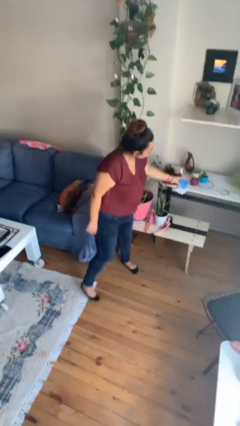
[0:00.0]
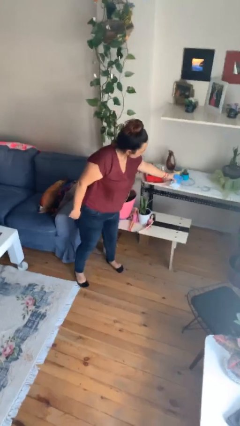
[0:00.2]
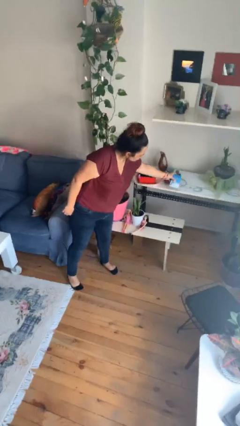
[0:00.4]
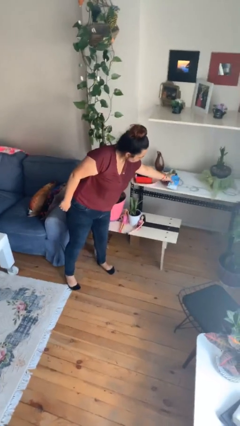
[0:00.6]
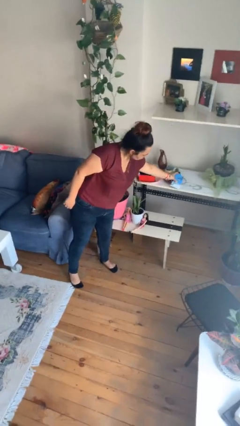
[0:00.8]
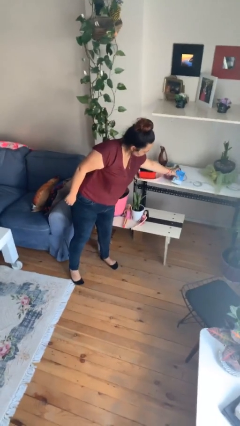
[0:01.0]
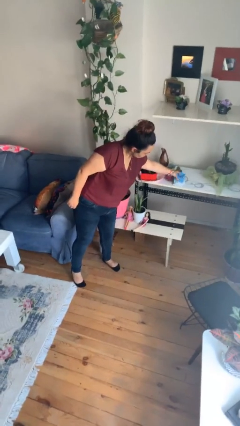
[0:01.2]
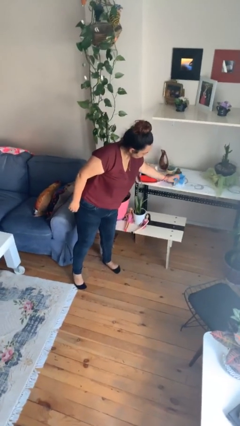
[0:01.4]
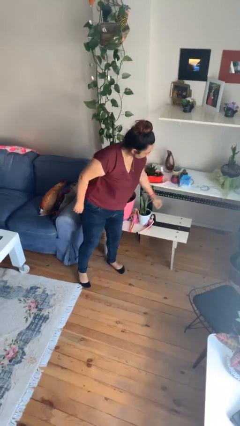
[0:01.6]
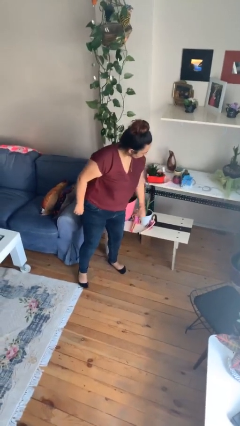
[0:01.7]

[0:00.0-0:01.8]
person puts down object on table

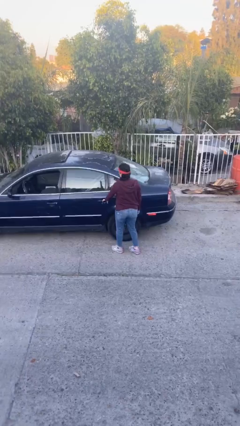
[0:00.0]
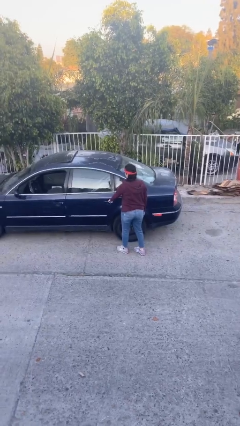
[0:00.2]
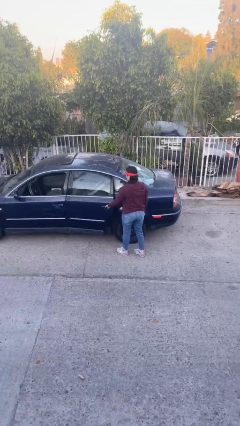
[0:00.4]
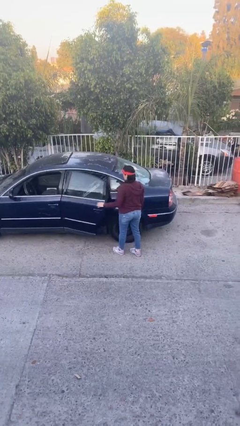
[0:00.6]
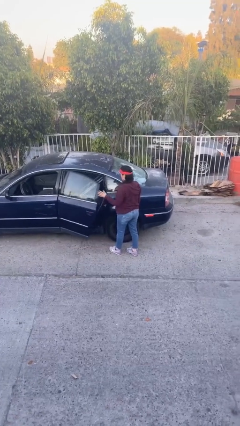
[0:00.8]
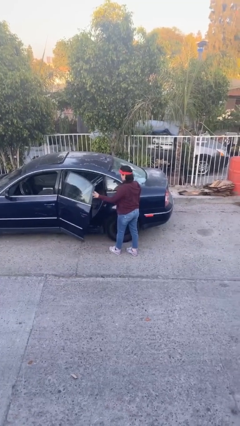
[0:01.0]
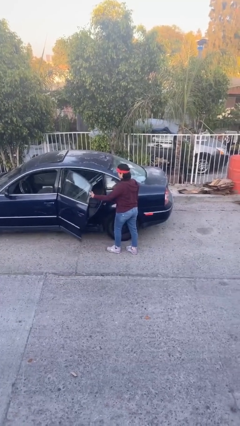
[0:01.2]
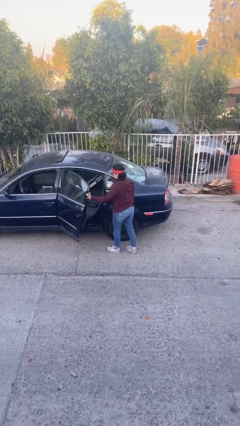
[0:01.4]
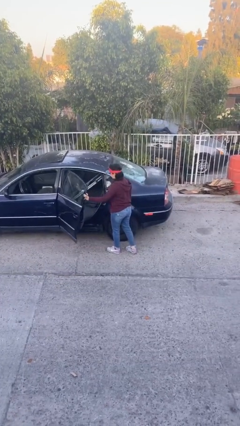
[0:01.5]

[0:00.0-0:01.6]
person opens car door

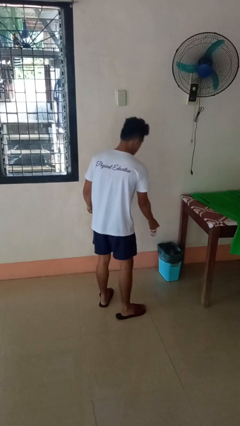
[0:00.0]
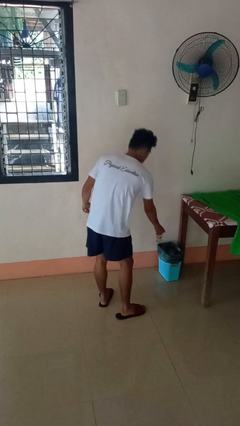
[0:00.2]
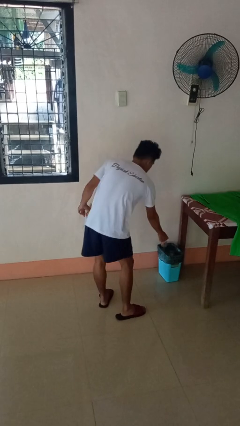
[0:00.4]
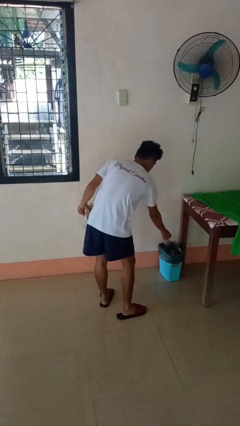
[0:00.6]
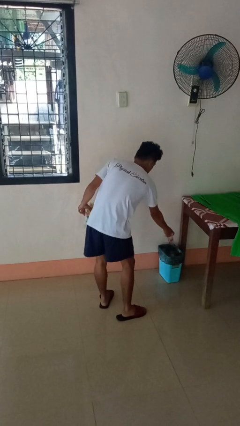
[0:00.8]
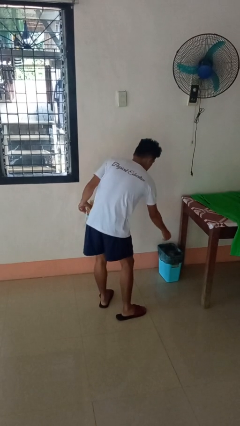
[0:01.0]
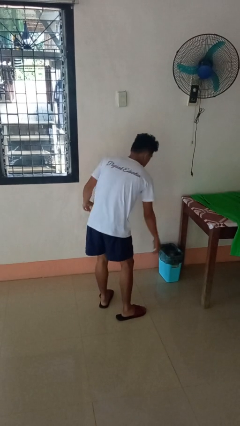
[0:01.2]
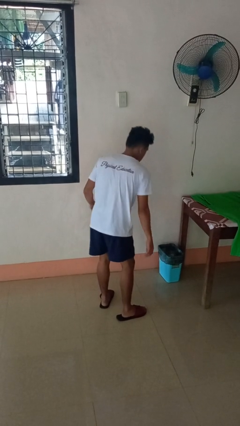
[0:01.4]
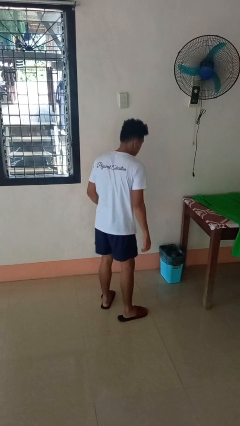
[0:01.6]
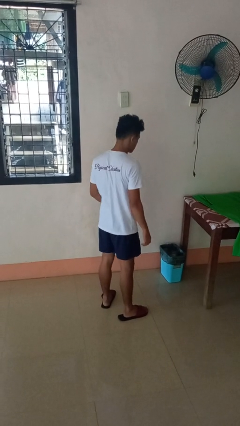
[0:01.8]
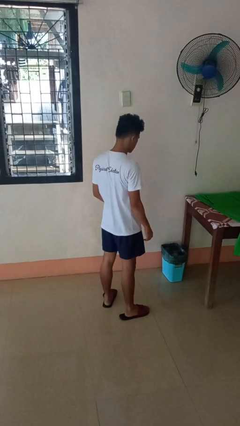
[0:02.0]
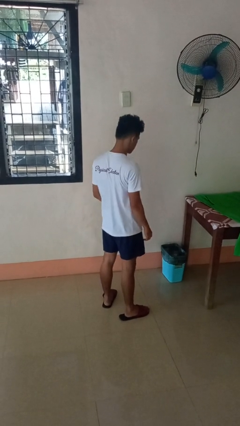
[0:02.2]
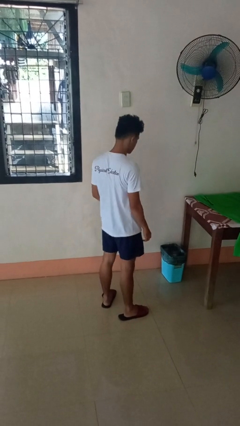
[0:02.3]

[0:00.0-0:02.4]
person discards trash

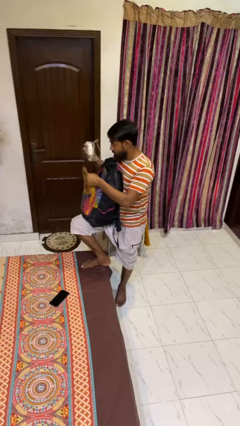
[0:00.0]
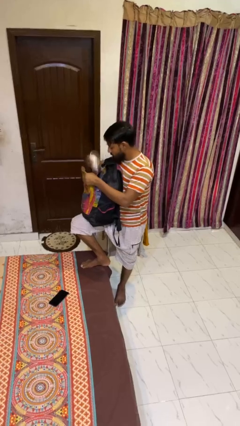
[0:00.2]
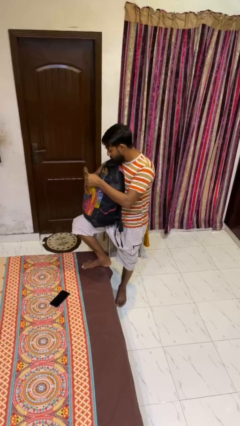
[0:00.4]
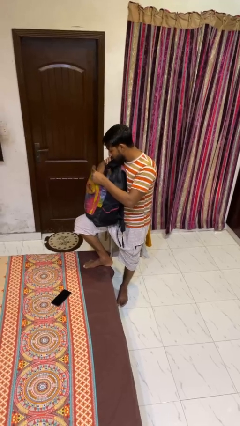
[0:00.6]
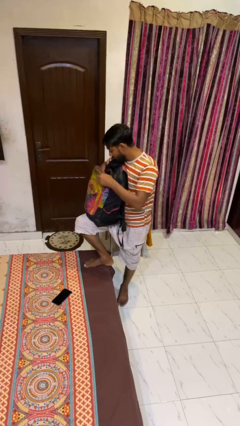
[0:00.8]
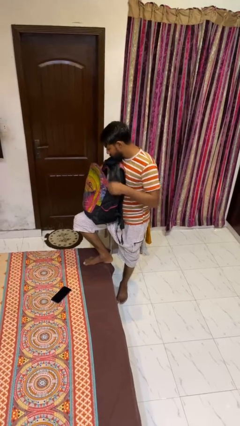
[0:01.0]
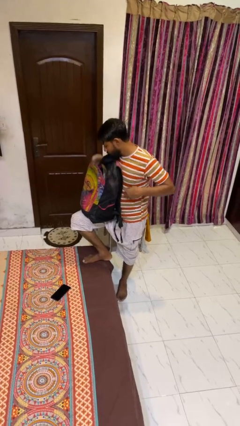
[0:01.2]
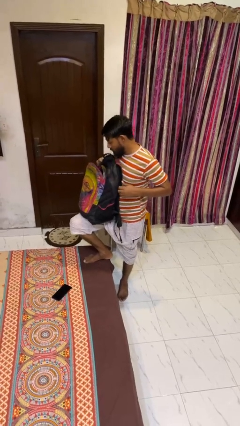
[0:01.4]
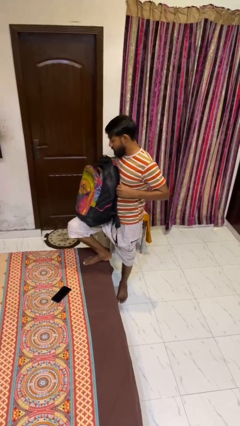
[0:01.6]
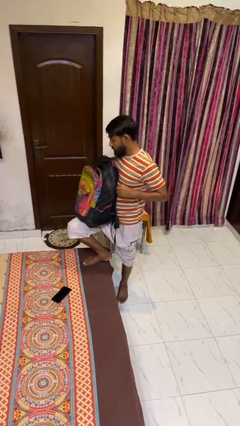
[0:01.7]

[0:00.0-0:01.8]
person puts object into backpack

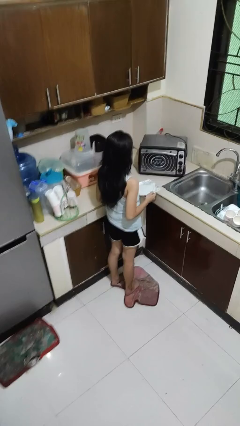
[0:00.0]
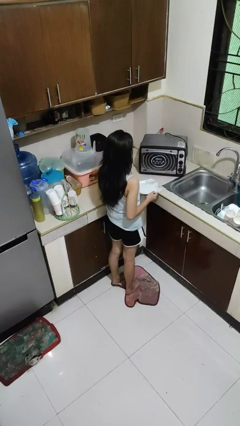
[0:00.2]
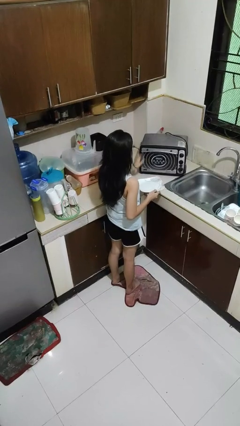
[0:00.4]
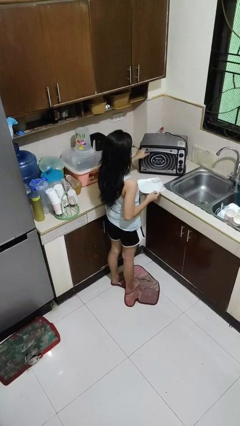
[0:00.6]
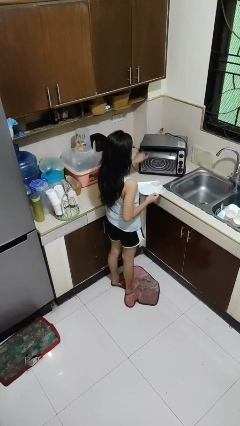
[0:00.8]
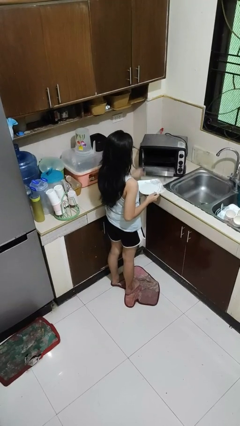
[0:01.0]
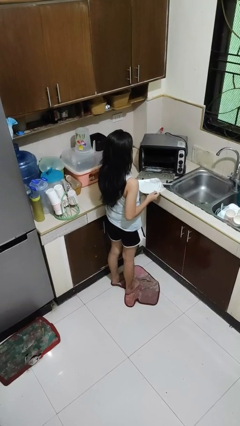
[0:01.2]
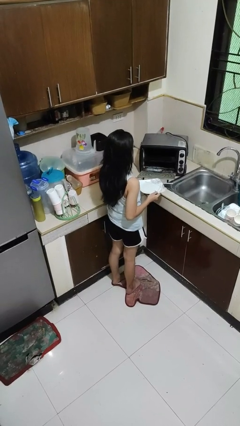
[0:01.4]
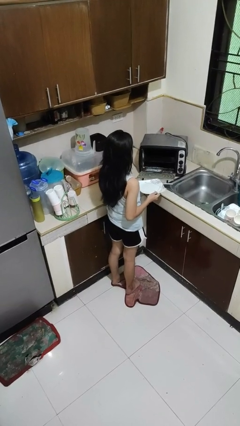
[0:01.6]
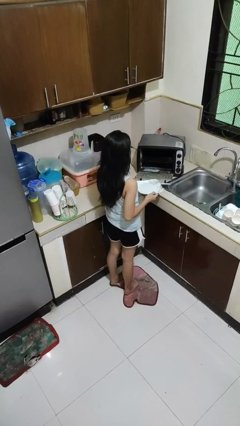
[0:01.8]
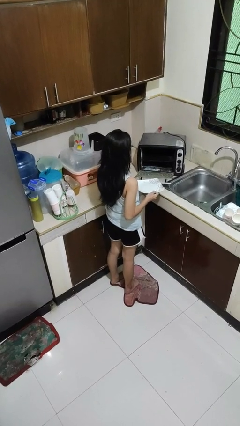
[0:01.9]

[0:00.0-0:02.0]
person opens microwave

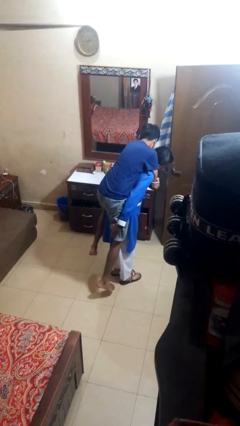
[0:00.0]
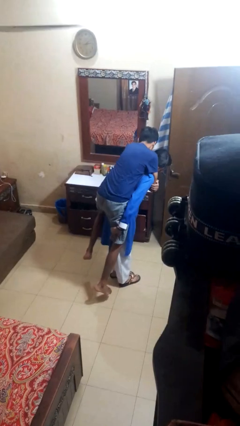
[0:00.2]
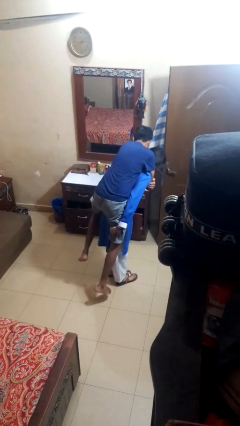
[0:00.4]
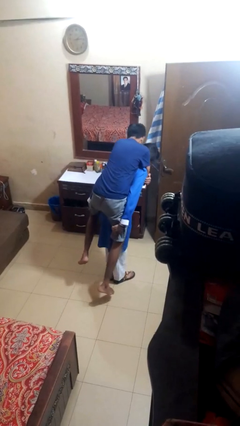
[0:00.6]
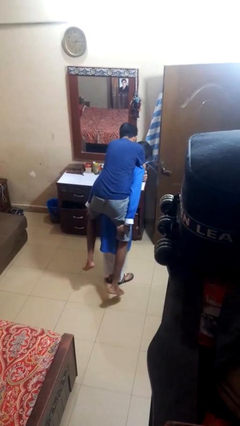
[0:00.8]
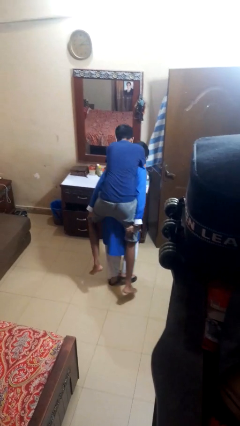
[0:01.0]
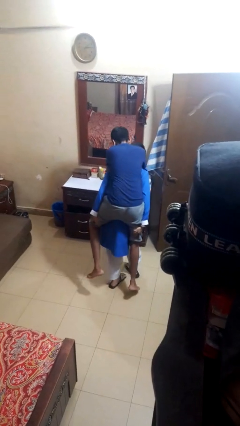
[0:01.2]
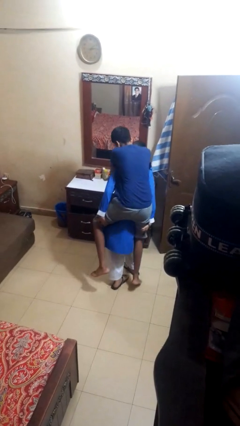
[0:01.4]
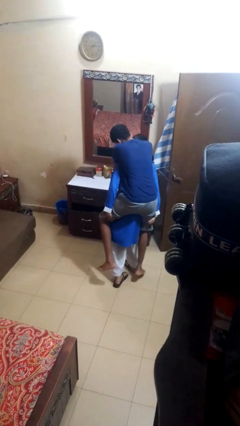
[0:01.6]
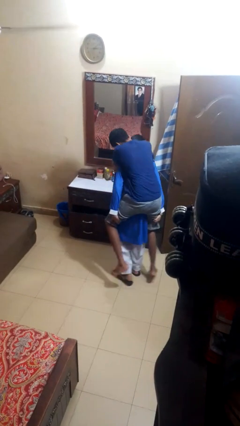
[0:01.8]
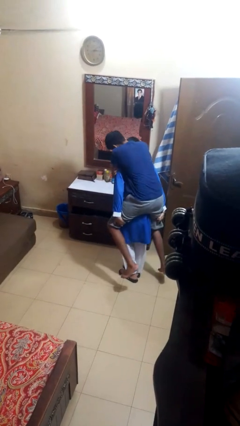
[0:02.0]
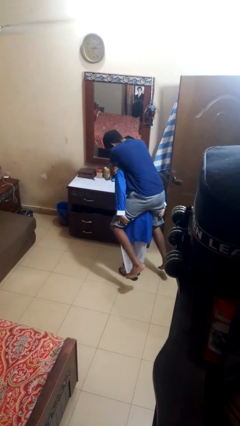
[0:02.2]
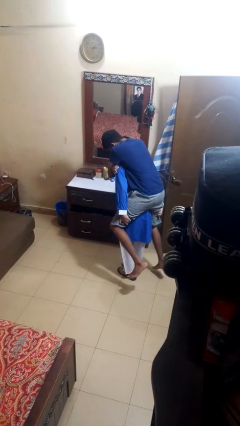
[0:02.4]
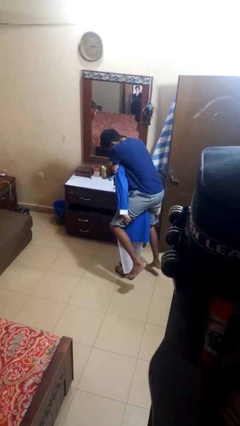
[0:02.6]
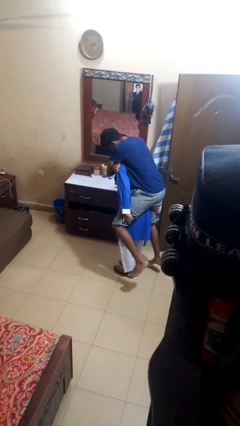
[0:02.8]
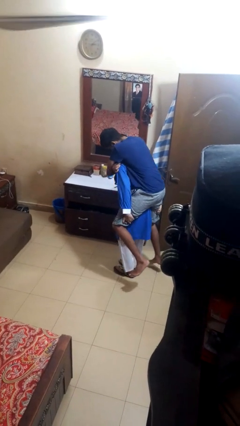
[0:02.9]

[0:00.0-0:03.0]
person carries person on back

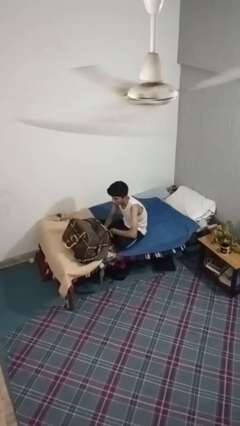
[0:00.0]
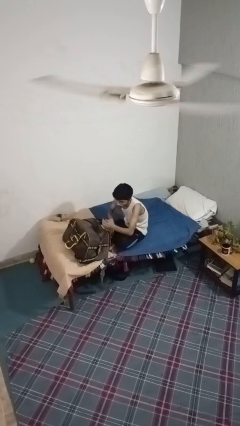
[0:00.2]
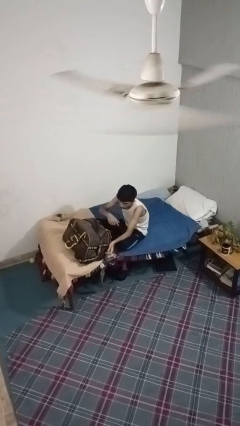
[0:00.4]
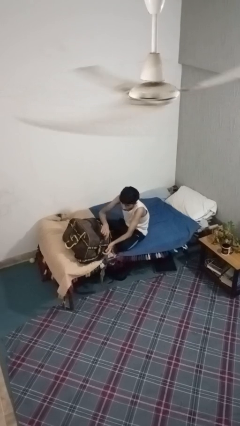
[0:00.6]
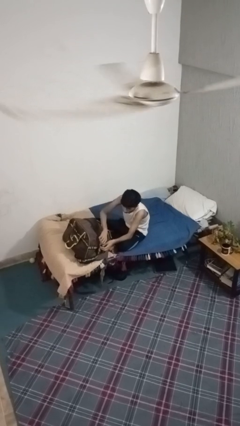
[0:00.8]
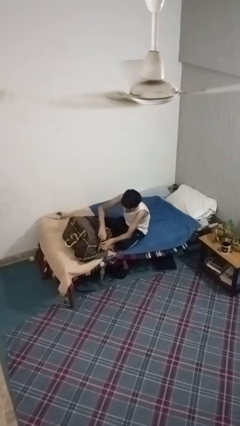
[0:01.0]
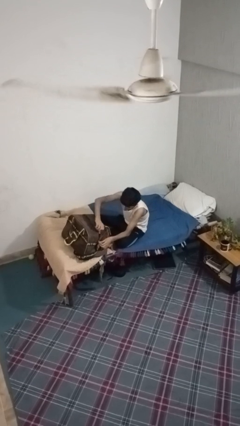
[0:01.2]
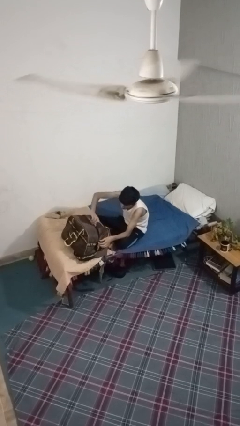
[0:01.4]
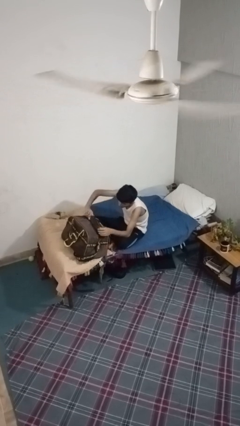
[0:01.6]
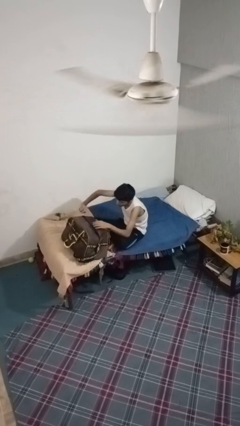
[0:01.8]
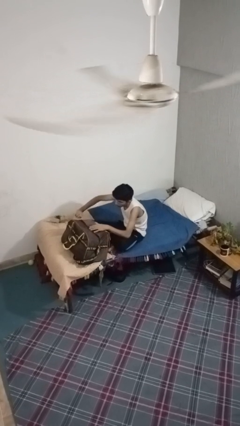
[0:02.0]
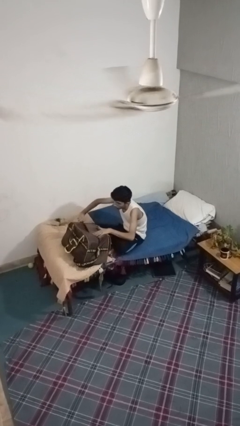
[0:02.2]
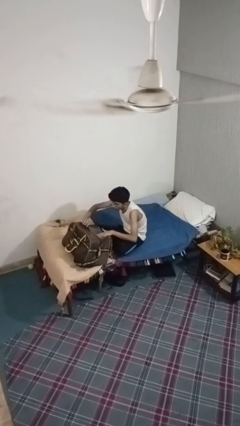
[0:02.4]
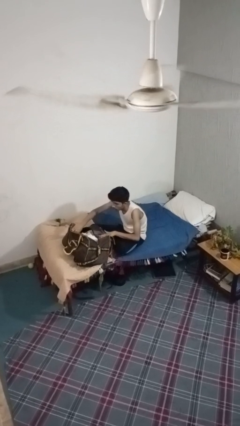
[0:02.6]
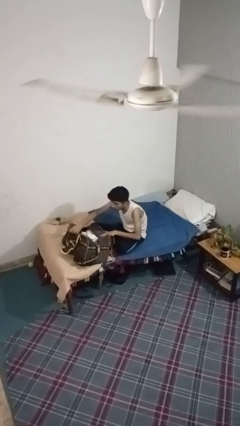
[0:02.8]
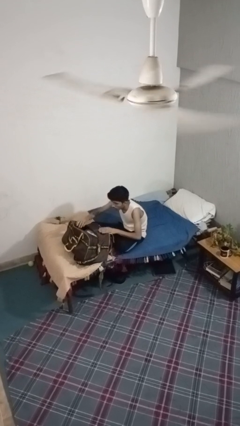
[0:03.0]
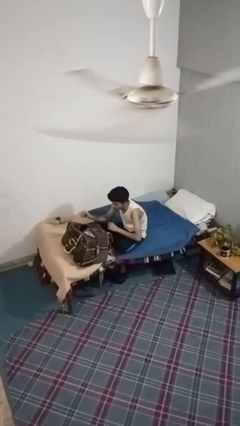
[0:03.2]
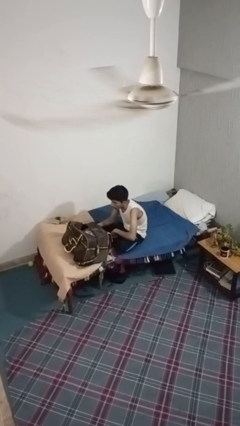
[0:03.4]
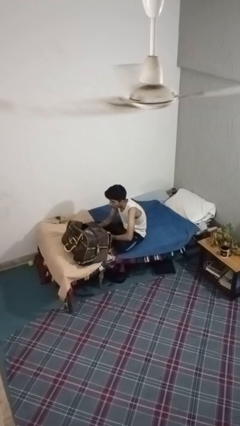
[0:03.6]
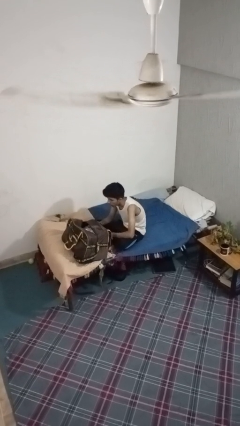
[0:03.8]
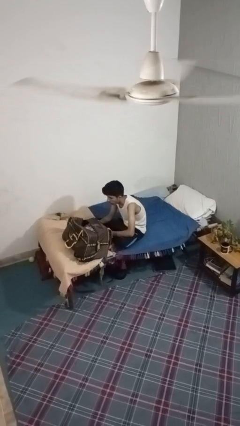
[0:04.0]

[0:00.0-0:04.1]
person opens suitcase

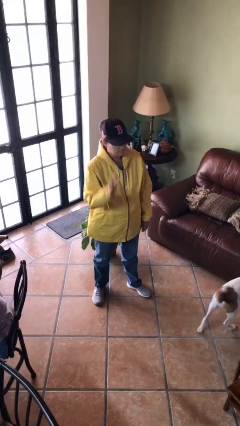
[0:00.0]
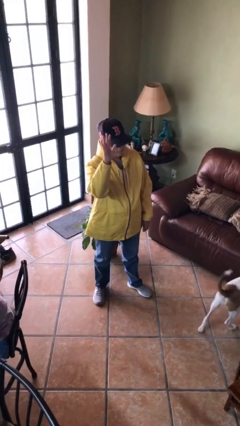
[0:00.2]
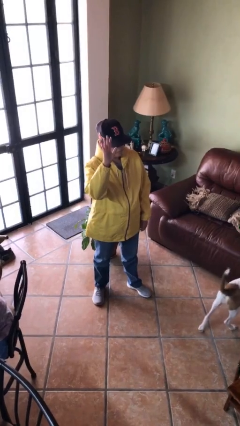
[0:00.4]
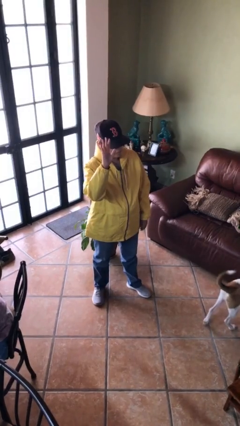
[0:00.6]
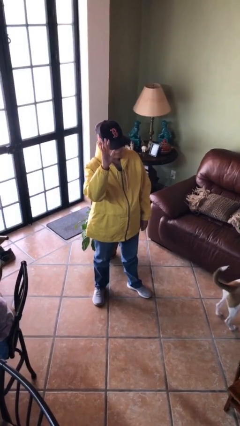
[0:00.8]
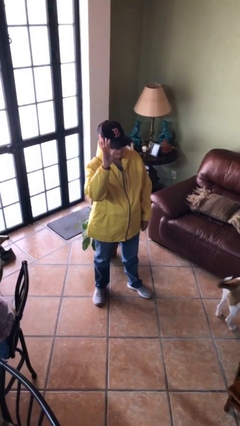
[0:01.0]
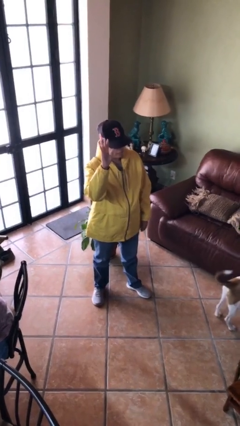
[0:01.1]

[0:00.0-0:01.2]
person gestures raise hand
